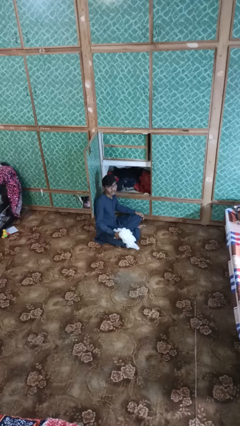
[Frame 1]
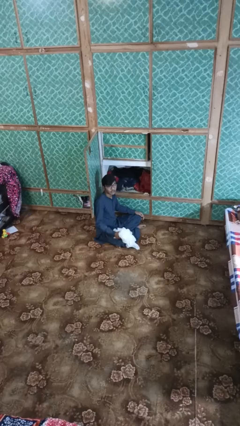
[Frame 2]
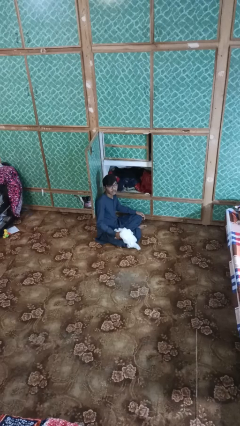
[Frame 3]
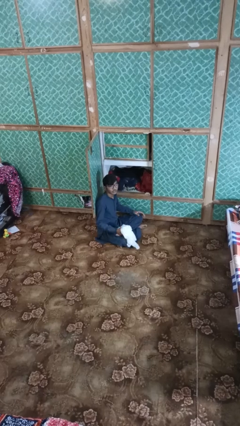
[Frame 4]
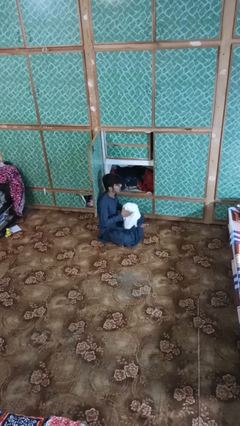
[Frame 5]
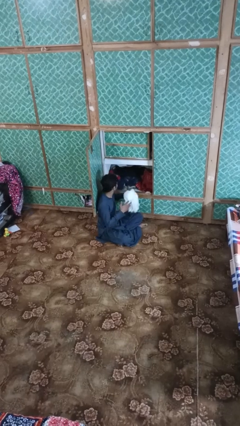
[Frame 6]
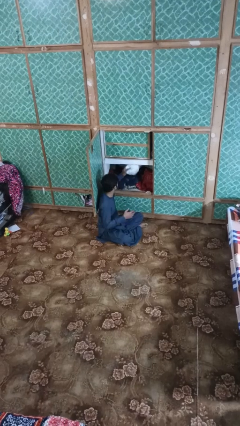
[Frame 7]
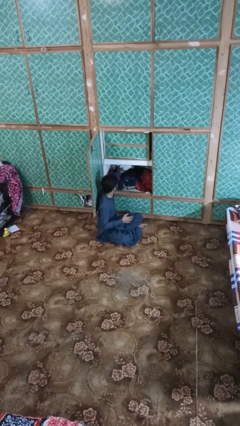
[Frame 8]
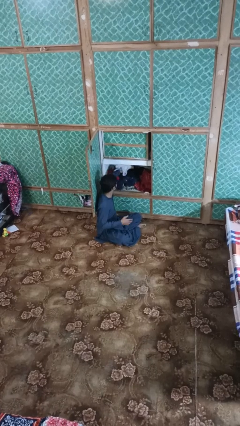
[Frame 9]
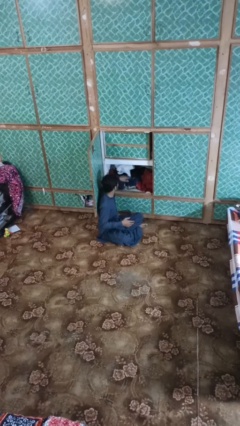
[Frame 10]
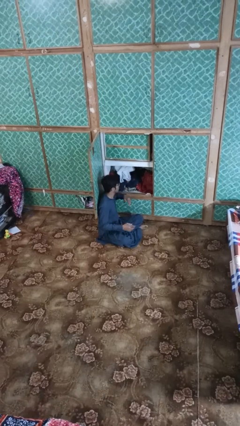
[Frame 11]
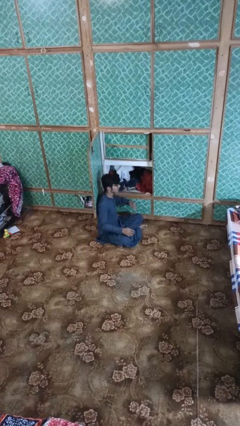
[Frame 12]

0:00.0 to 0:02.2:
person puts clothes into dresser

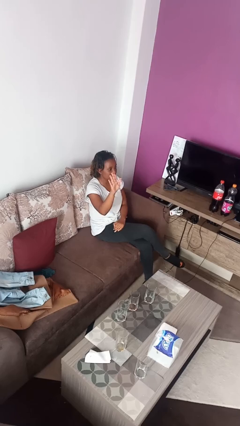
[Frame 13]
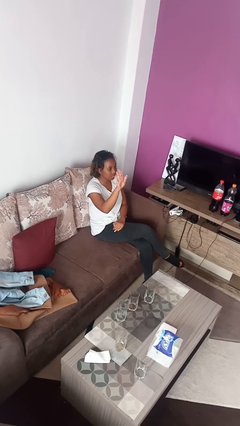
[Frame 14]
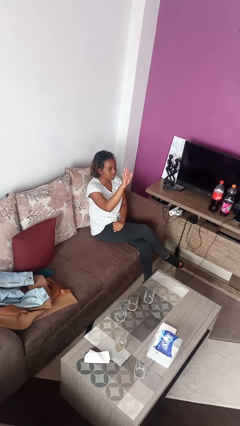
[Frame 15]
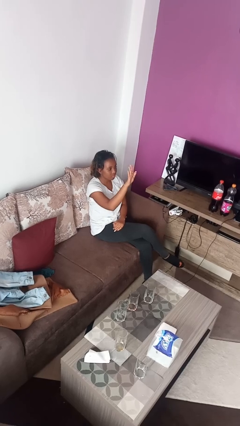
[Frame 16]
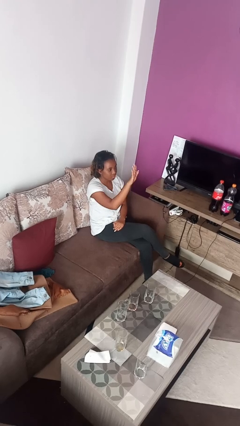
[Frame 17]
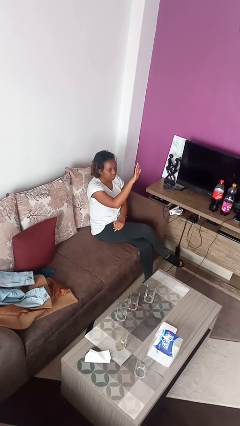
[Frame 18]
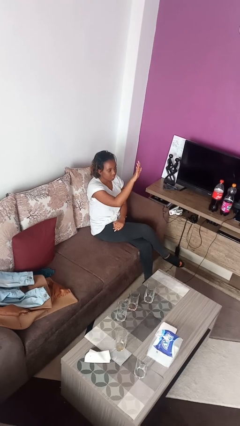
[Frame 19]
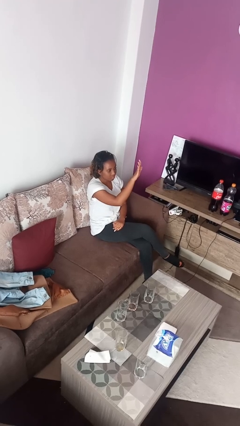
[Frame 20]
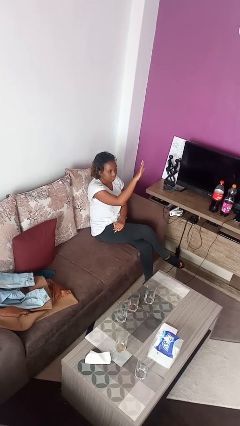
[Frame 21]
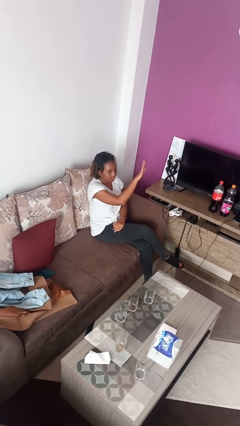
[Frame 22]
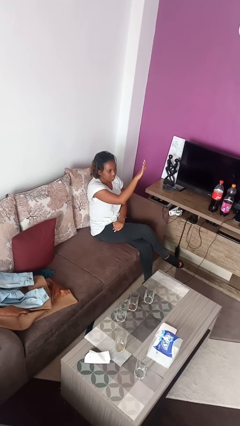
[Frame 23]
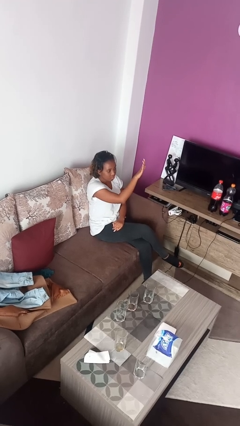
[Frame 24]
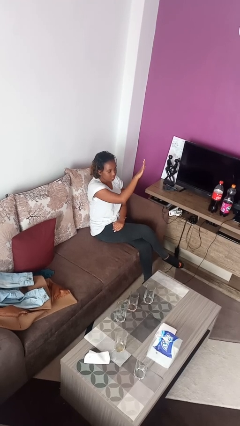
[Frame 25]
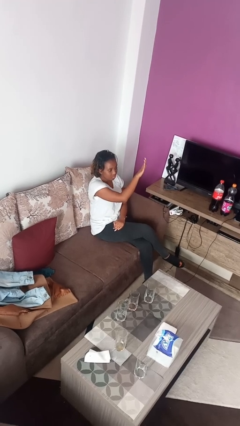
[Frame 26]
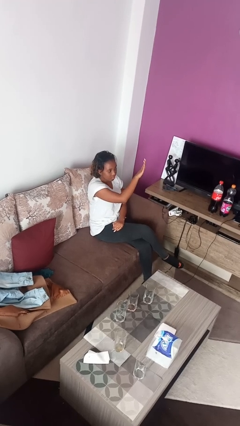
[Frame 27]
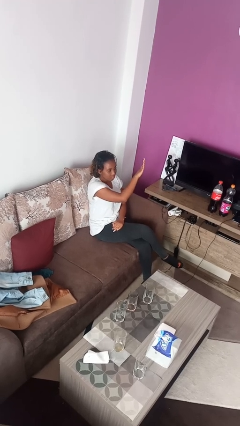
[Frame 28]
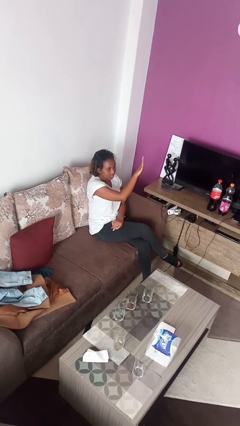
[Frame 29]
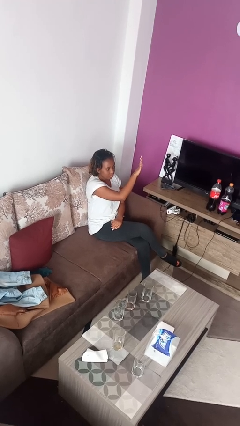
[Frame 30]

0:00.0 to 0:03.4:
person gestures swipe left

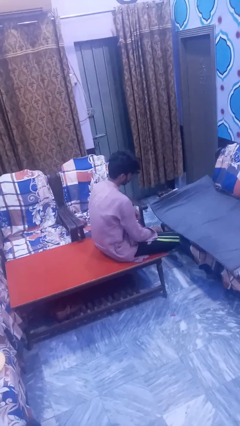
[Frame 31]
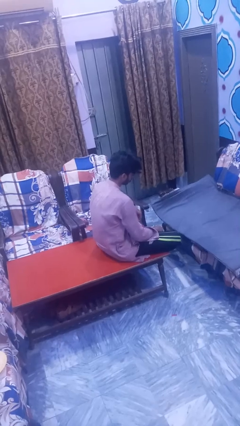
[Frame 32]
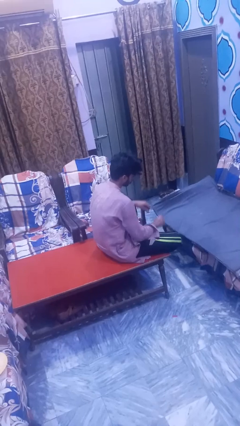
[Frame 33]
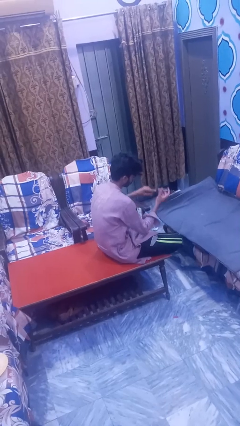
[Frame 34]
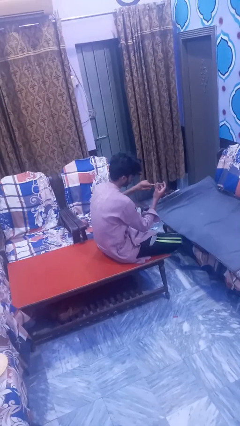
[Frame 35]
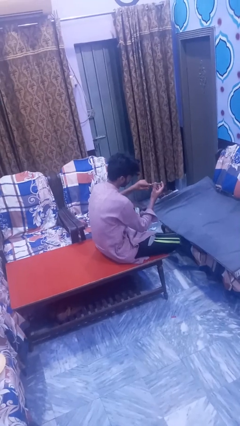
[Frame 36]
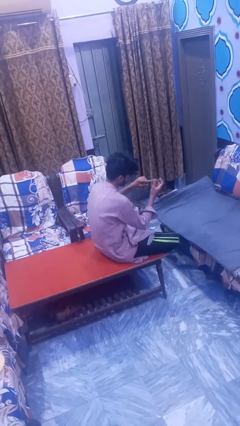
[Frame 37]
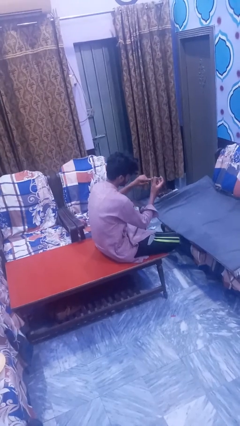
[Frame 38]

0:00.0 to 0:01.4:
person clips fingernails

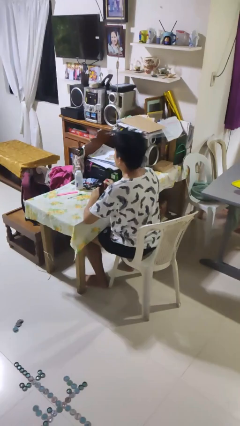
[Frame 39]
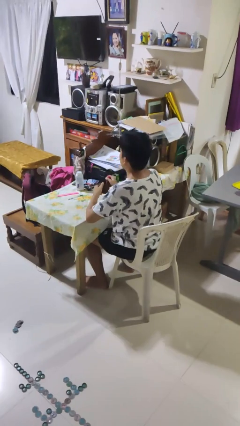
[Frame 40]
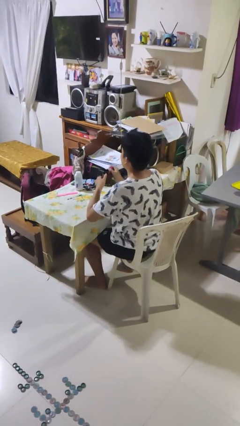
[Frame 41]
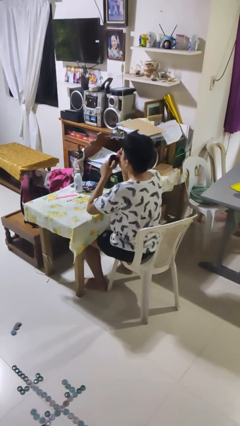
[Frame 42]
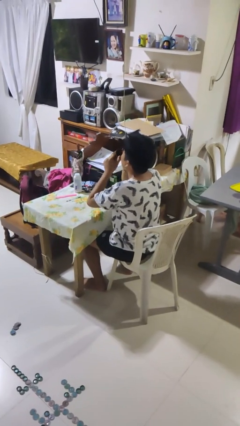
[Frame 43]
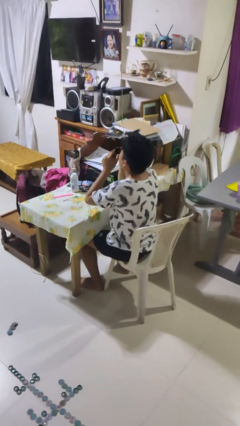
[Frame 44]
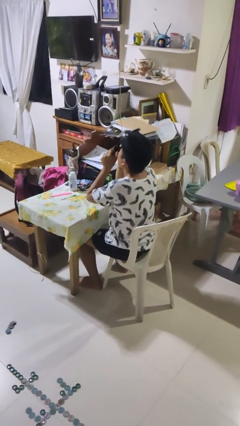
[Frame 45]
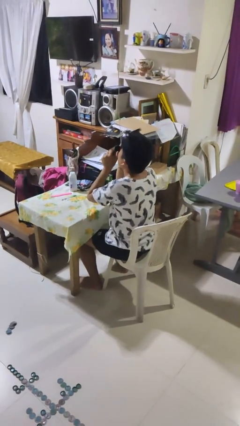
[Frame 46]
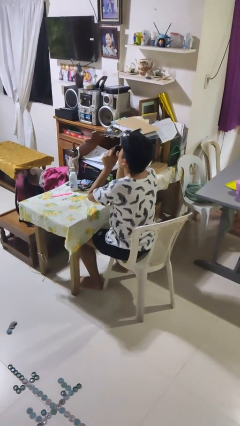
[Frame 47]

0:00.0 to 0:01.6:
person drinks from mug

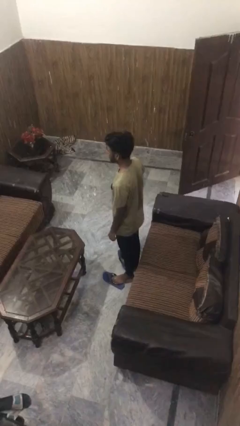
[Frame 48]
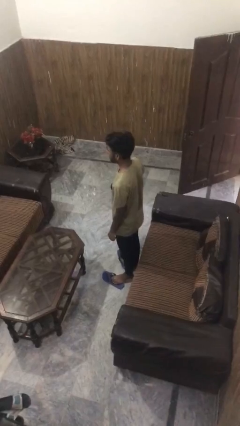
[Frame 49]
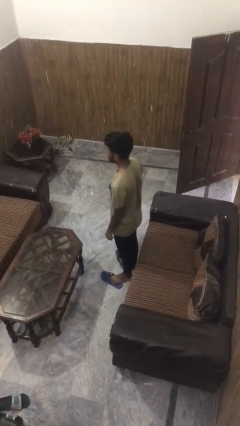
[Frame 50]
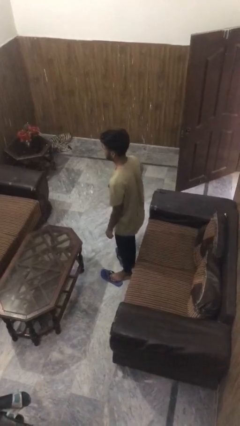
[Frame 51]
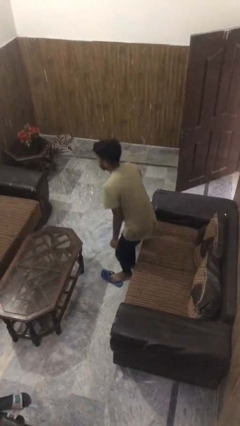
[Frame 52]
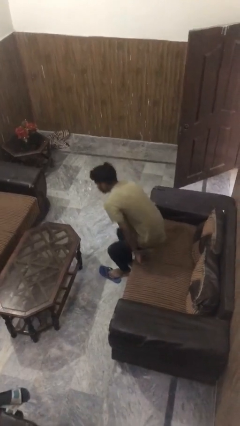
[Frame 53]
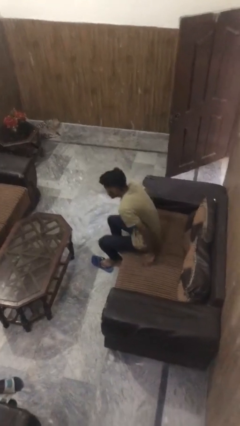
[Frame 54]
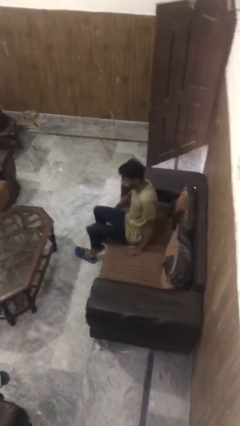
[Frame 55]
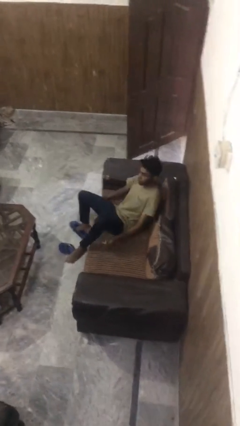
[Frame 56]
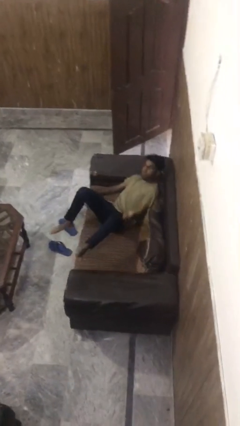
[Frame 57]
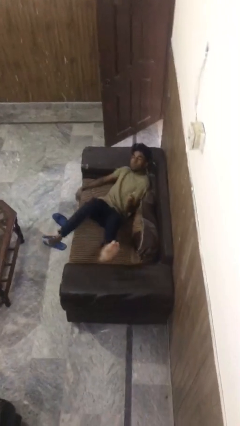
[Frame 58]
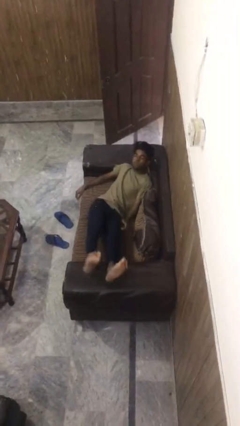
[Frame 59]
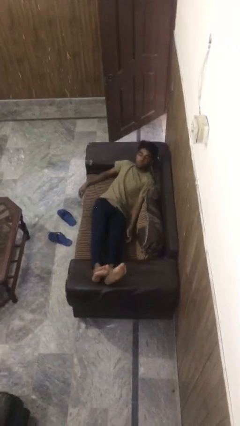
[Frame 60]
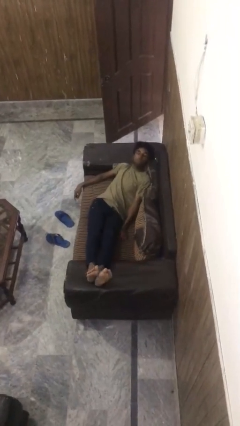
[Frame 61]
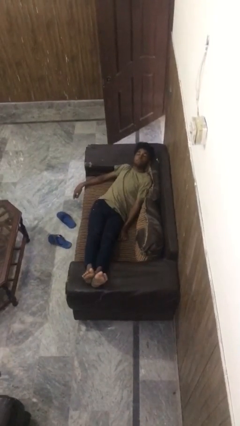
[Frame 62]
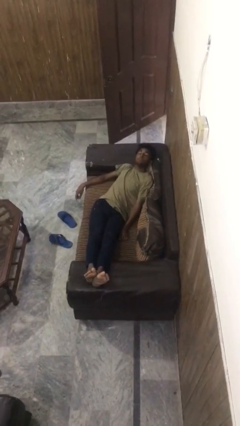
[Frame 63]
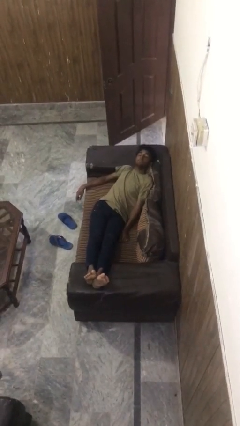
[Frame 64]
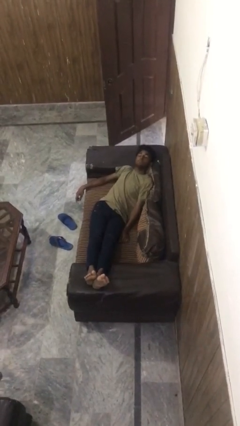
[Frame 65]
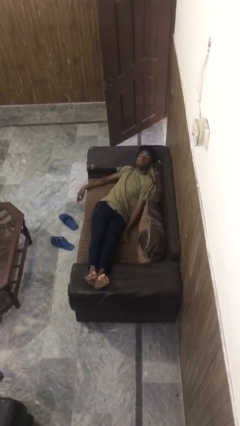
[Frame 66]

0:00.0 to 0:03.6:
person lies down on couch

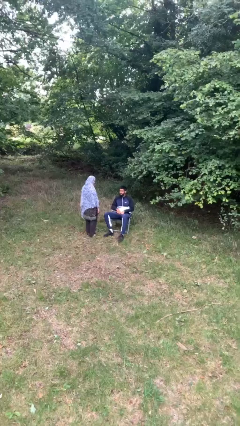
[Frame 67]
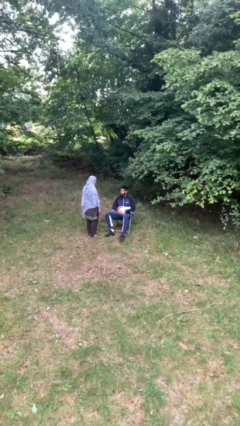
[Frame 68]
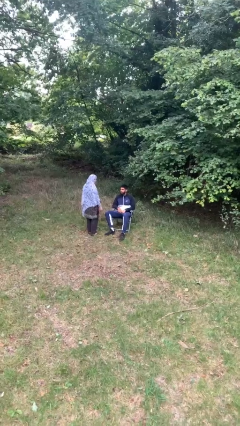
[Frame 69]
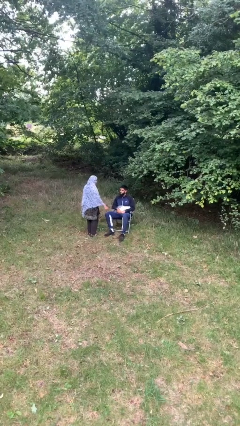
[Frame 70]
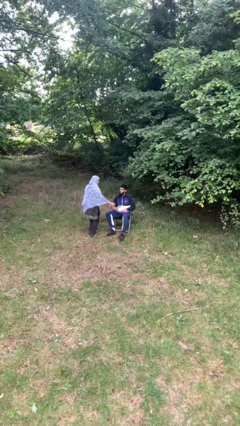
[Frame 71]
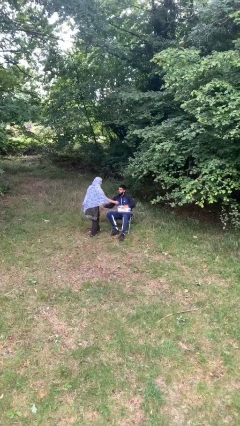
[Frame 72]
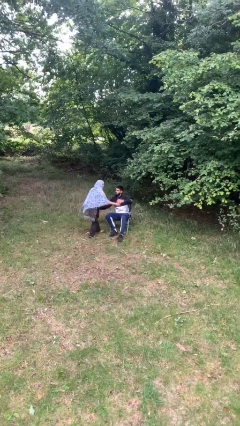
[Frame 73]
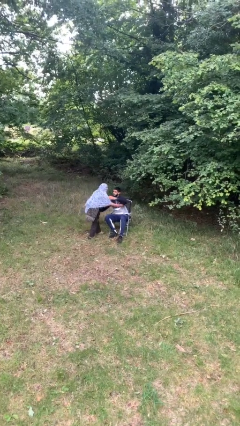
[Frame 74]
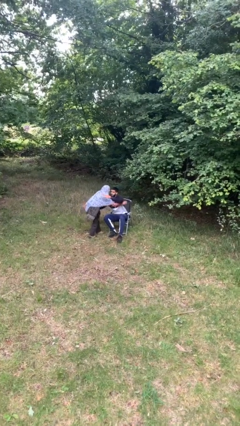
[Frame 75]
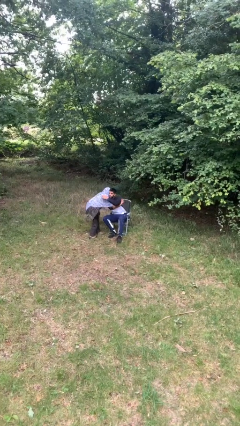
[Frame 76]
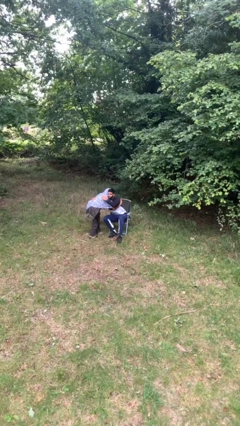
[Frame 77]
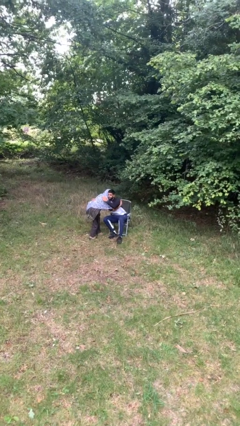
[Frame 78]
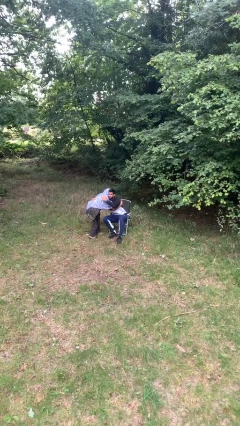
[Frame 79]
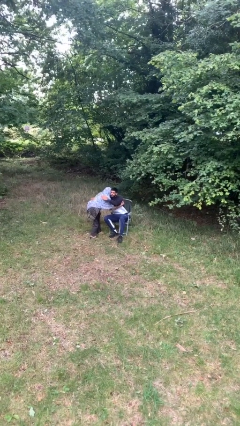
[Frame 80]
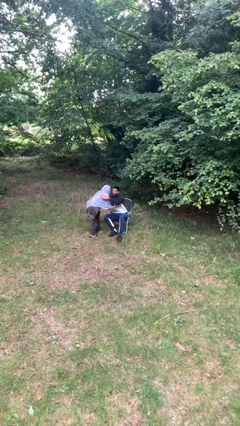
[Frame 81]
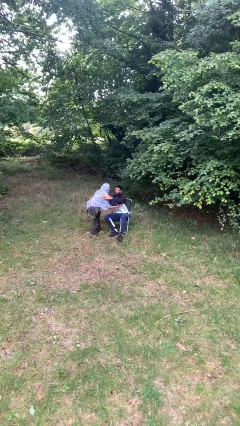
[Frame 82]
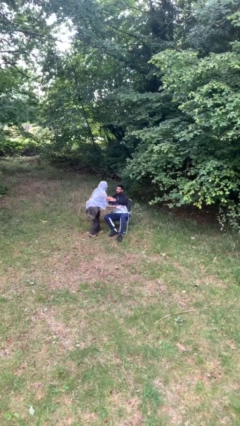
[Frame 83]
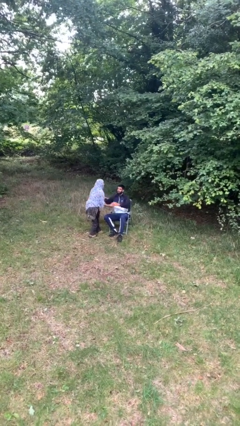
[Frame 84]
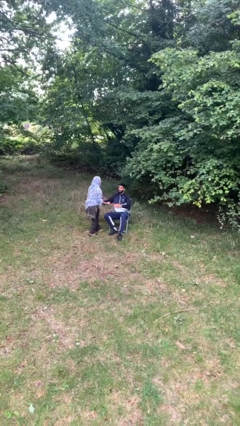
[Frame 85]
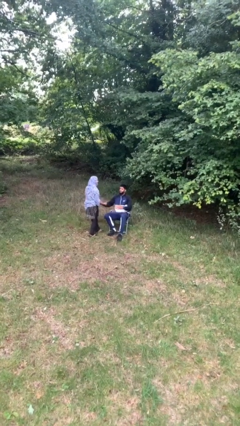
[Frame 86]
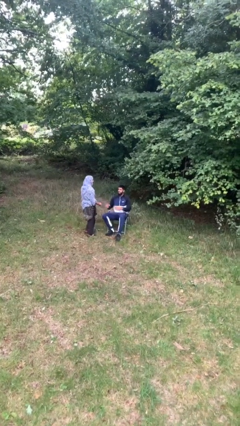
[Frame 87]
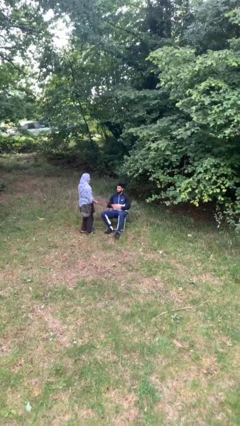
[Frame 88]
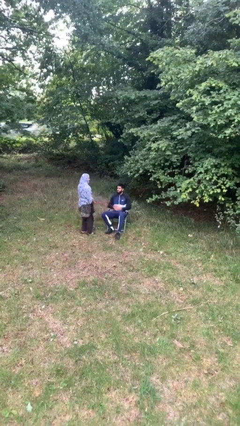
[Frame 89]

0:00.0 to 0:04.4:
person embraces person

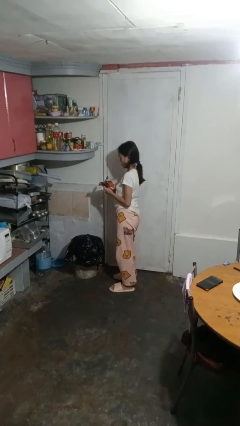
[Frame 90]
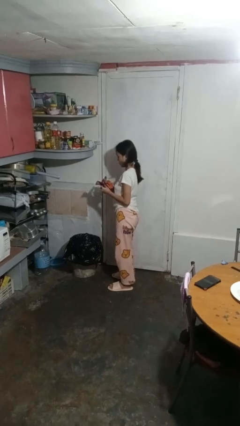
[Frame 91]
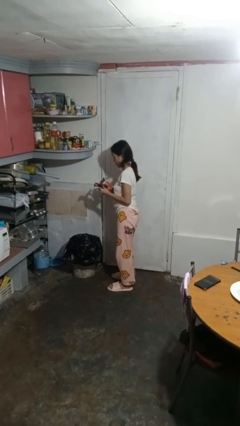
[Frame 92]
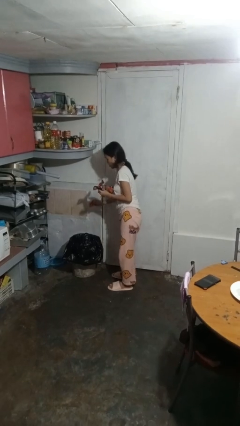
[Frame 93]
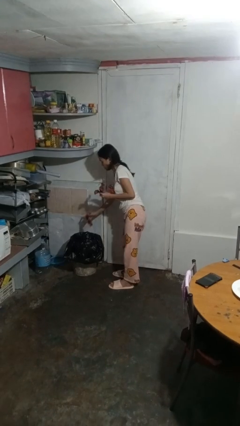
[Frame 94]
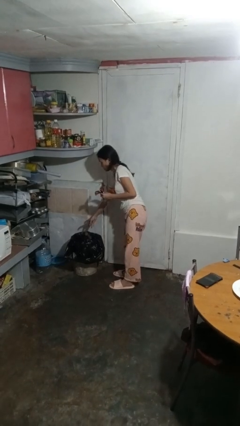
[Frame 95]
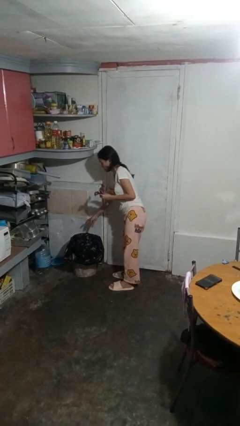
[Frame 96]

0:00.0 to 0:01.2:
person discards trash
